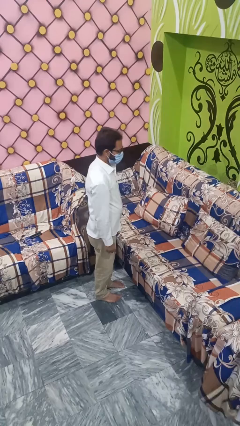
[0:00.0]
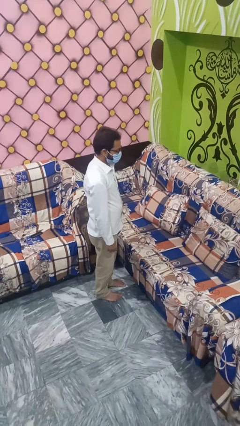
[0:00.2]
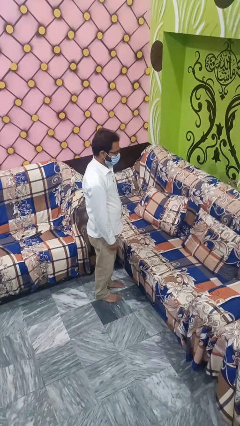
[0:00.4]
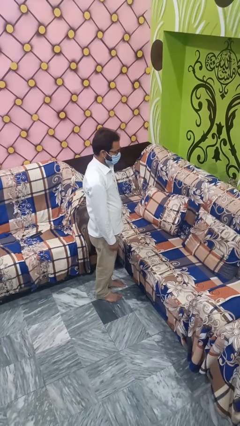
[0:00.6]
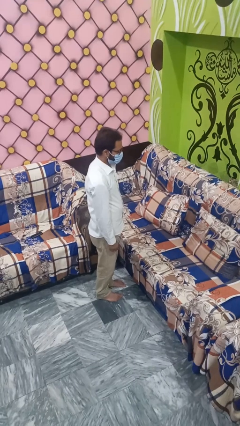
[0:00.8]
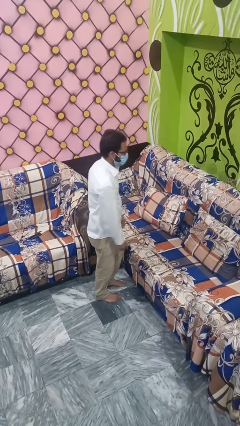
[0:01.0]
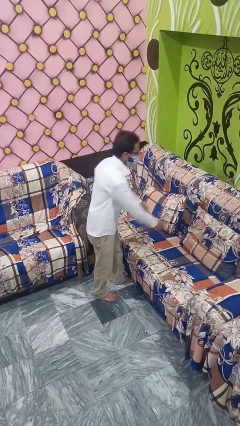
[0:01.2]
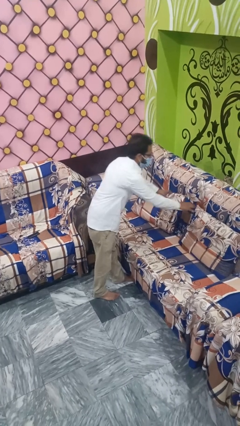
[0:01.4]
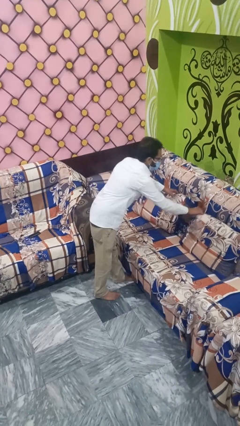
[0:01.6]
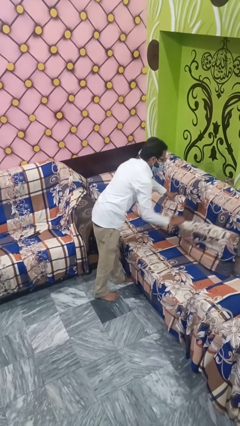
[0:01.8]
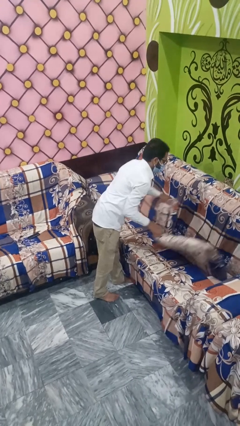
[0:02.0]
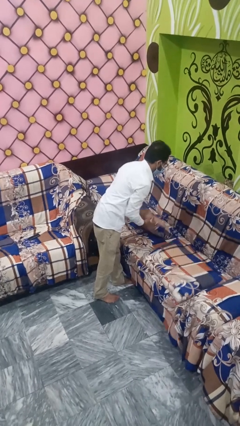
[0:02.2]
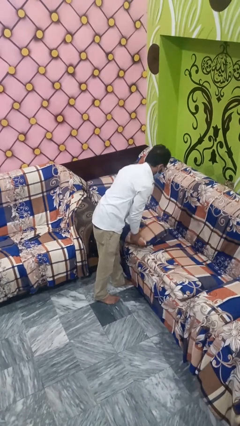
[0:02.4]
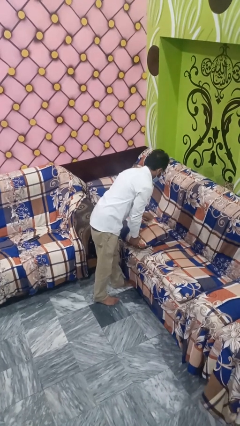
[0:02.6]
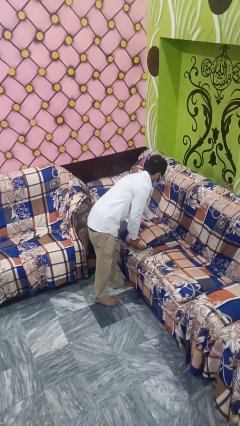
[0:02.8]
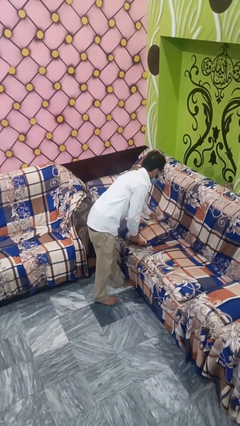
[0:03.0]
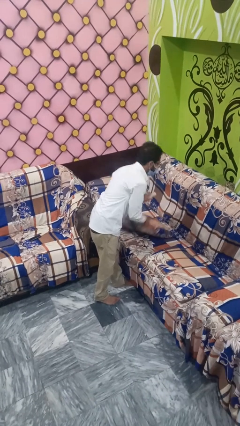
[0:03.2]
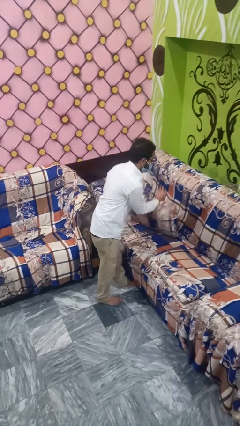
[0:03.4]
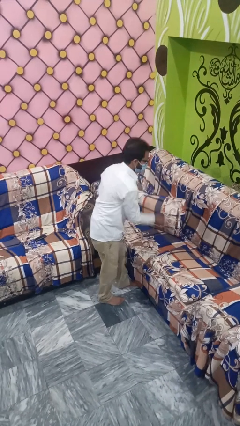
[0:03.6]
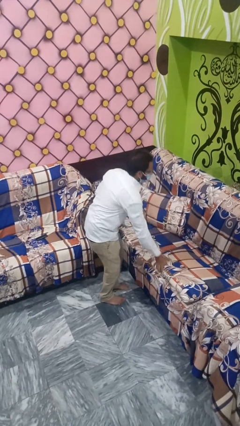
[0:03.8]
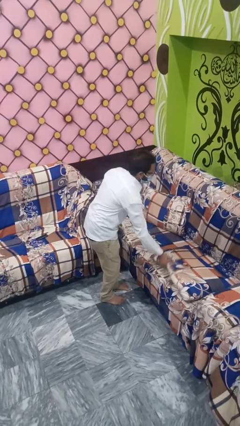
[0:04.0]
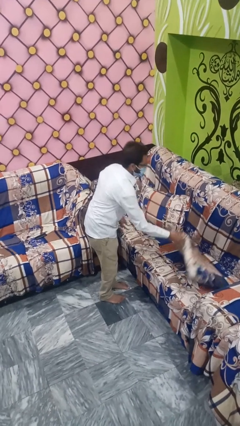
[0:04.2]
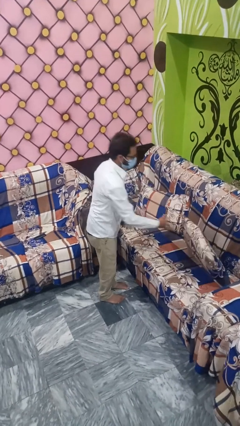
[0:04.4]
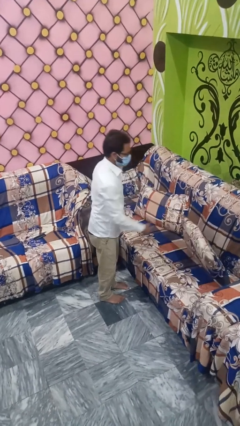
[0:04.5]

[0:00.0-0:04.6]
person searches in couch

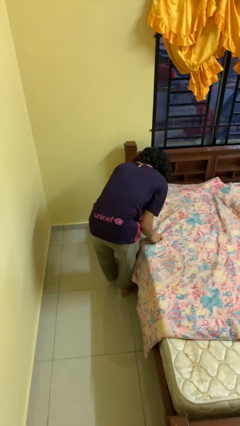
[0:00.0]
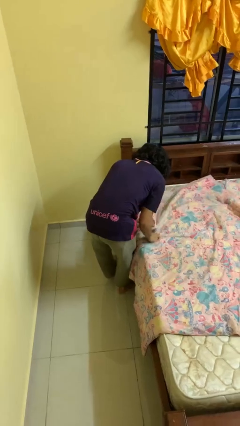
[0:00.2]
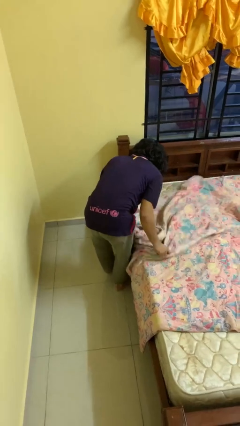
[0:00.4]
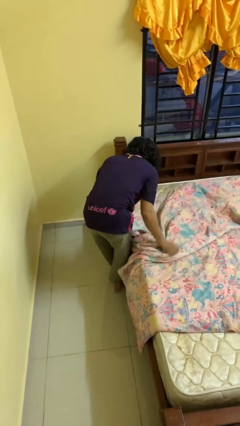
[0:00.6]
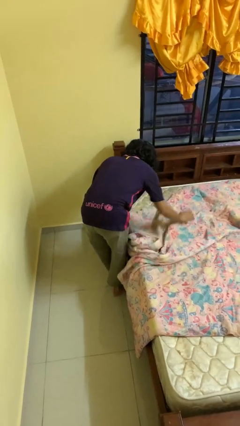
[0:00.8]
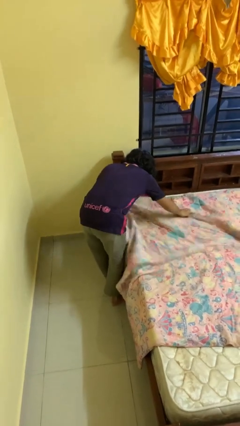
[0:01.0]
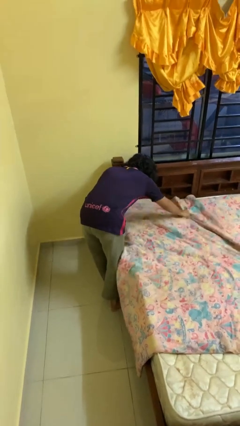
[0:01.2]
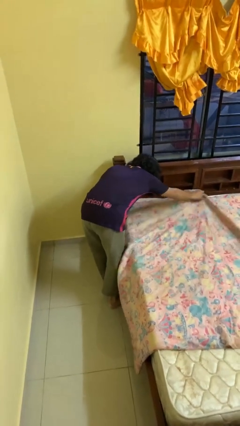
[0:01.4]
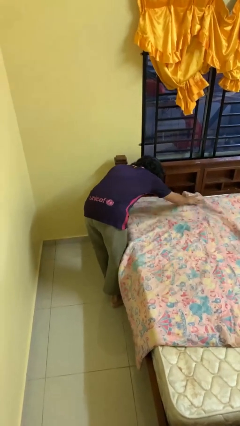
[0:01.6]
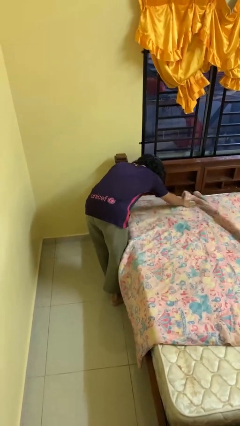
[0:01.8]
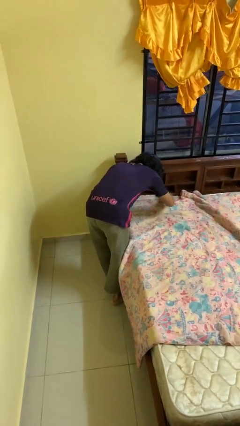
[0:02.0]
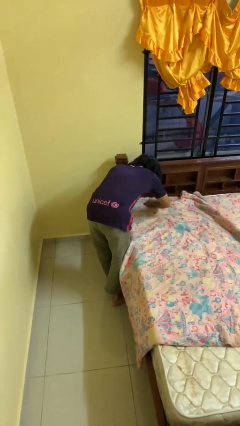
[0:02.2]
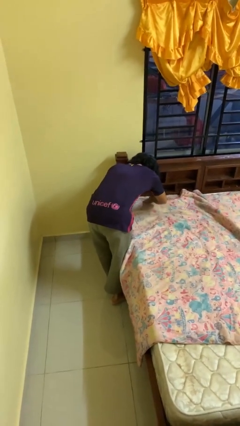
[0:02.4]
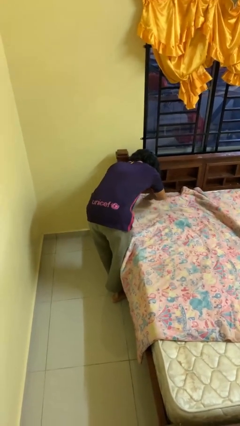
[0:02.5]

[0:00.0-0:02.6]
person makes bed

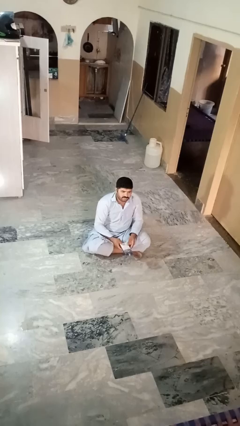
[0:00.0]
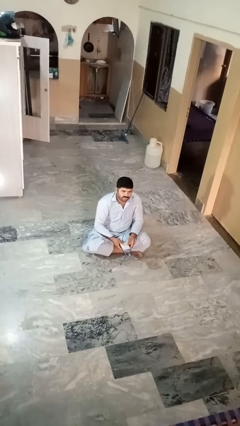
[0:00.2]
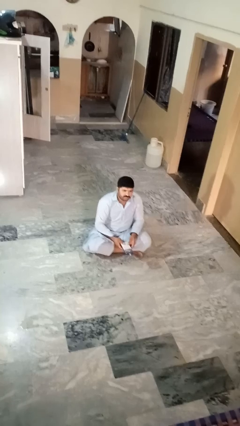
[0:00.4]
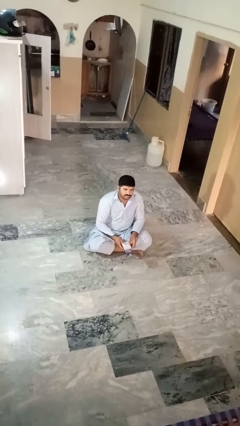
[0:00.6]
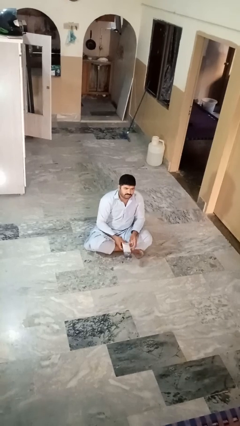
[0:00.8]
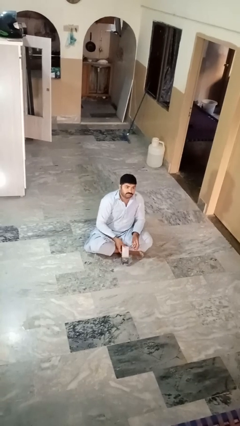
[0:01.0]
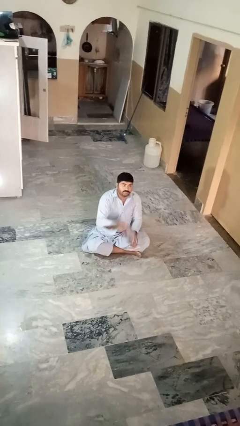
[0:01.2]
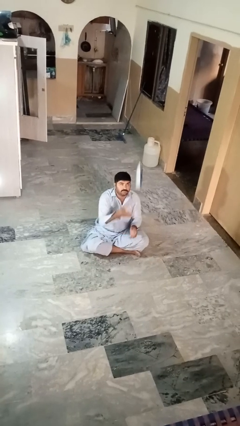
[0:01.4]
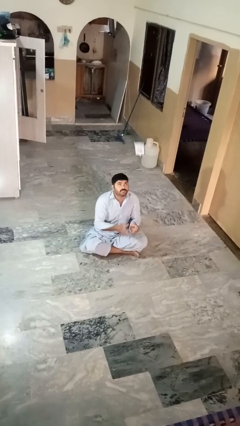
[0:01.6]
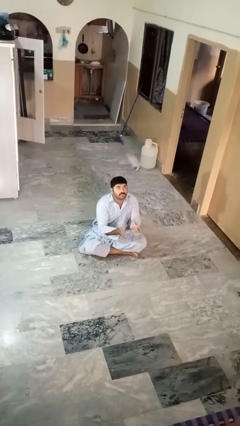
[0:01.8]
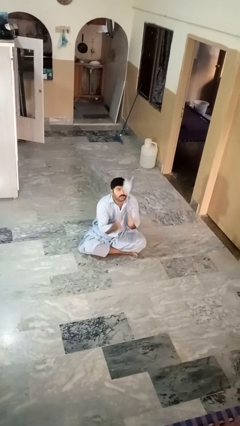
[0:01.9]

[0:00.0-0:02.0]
person drops object

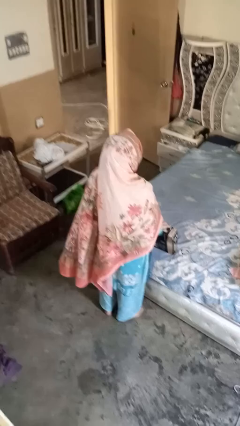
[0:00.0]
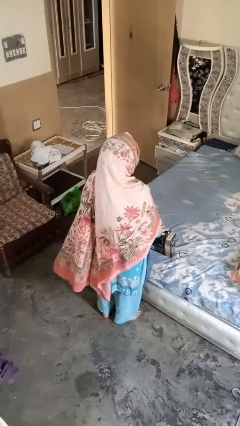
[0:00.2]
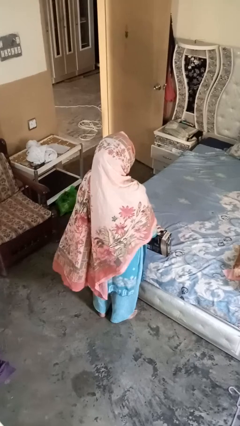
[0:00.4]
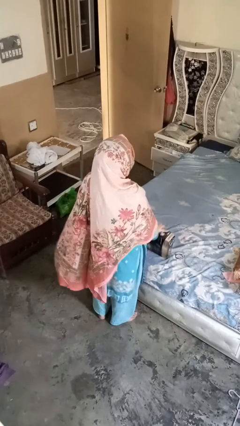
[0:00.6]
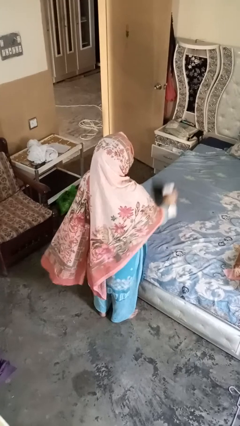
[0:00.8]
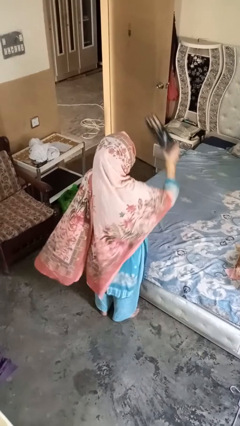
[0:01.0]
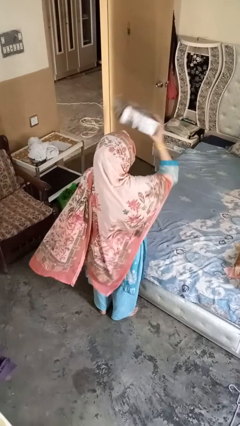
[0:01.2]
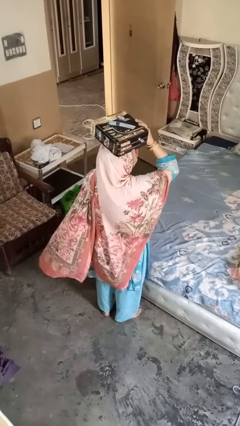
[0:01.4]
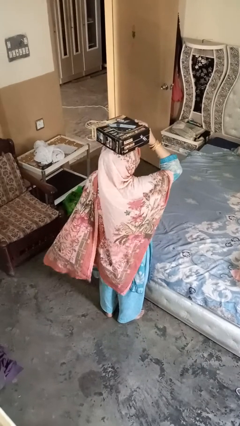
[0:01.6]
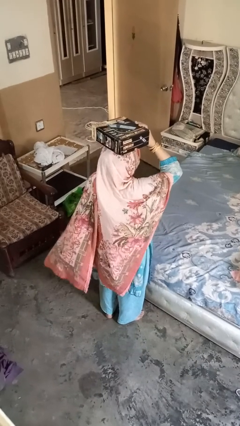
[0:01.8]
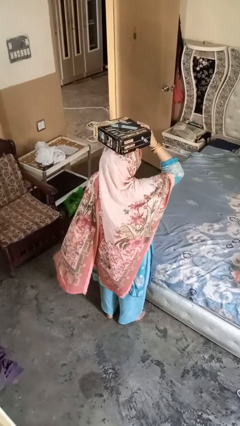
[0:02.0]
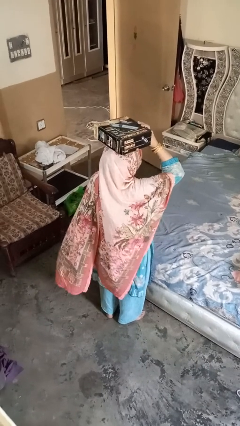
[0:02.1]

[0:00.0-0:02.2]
person holds object above head

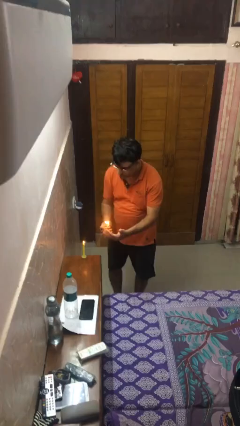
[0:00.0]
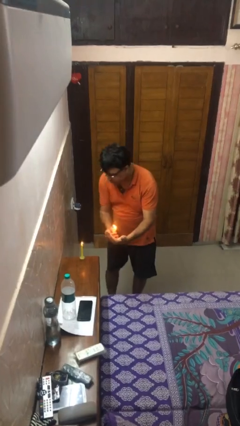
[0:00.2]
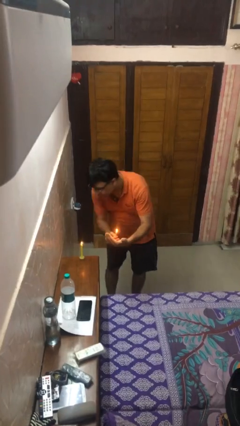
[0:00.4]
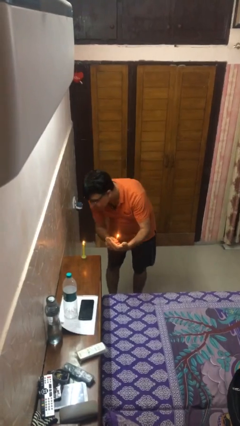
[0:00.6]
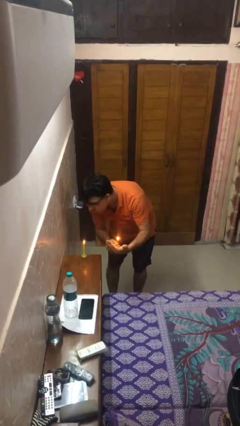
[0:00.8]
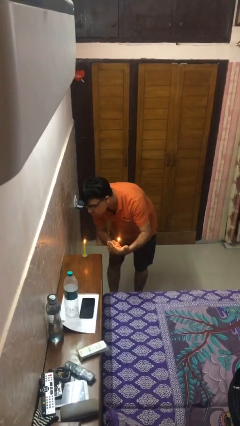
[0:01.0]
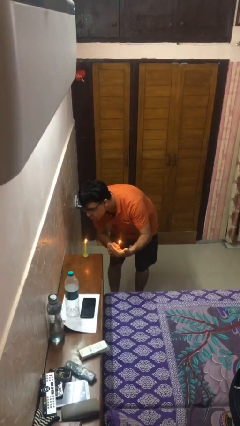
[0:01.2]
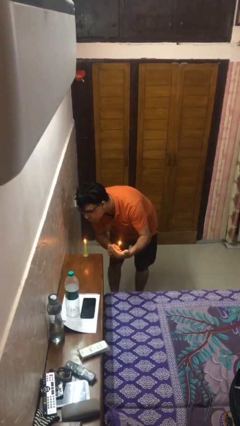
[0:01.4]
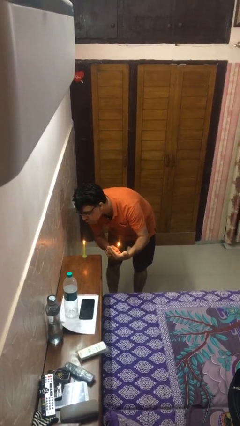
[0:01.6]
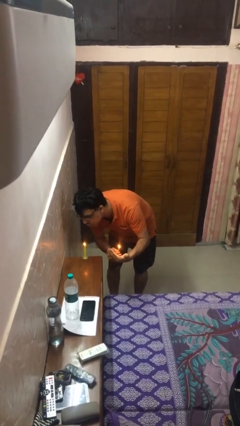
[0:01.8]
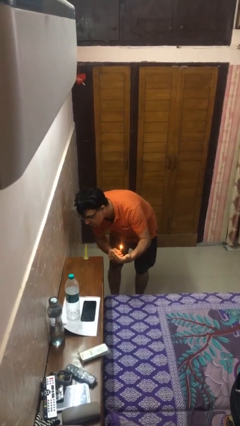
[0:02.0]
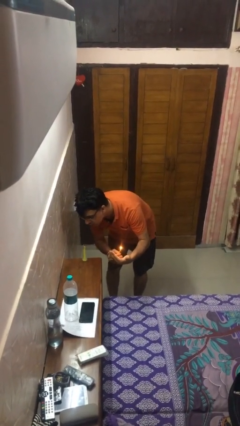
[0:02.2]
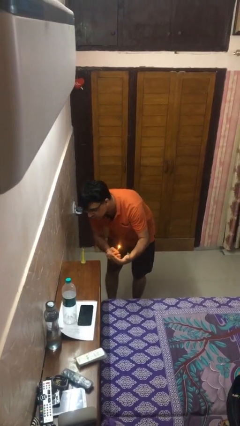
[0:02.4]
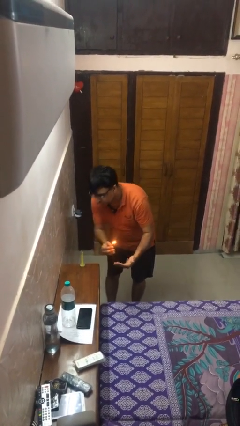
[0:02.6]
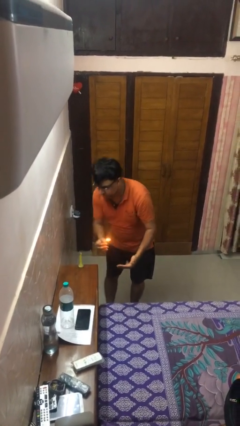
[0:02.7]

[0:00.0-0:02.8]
person extinguishes candle

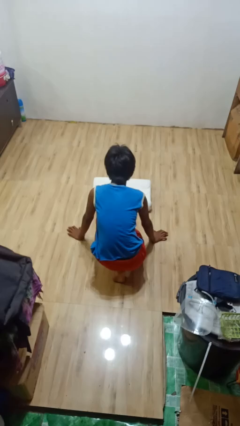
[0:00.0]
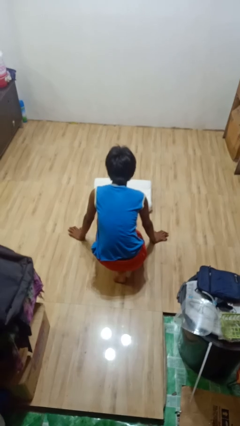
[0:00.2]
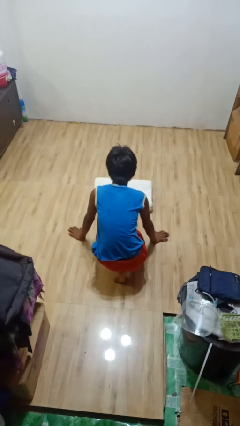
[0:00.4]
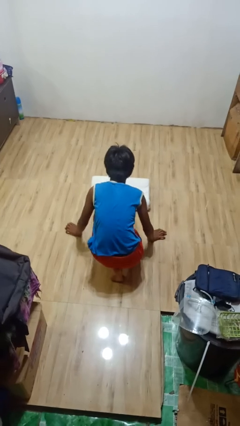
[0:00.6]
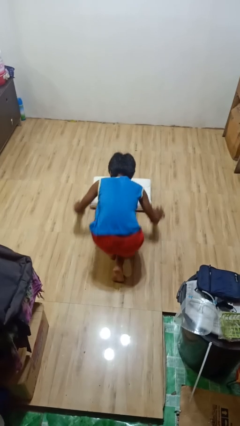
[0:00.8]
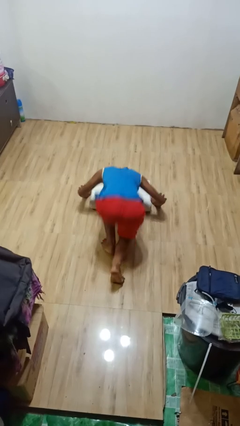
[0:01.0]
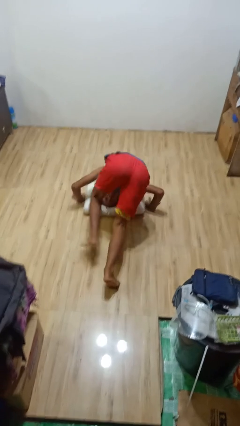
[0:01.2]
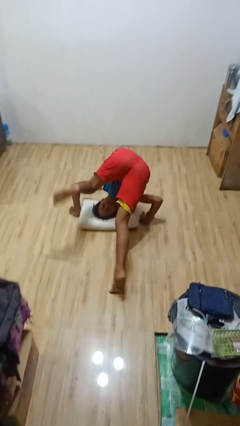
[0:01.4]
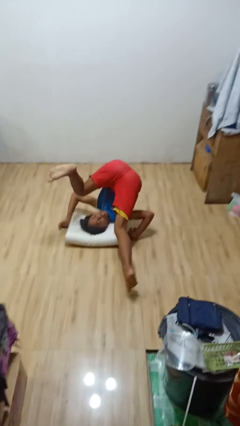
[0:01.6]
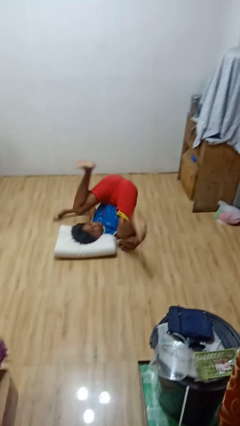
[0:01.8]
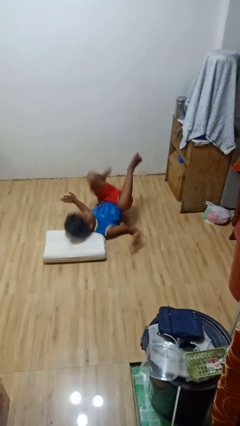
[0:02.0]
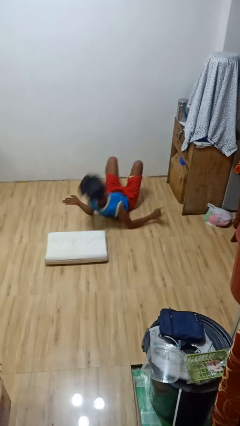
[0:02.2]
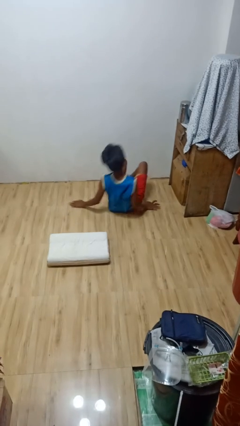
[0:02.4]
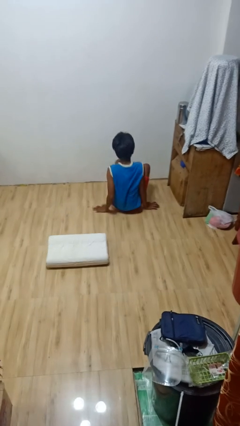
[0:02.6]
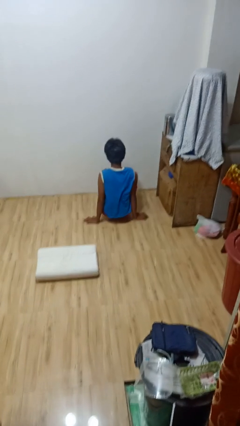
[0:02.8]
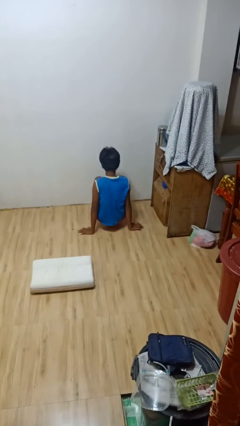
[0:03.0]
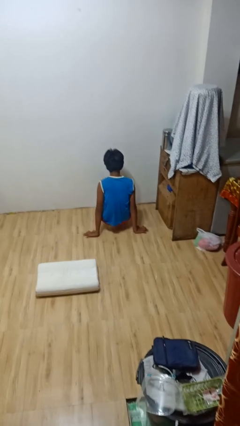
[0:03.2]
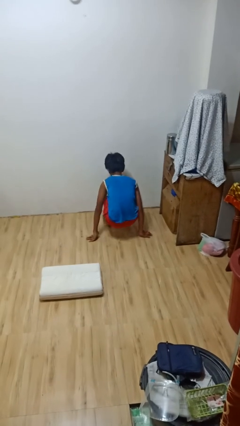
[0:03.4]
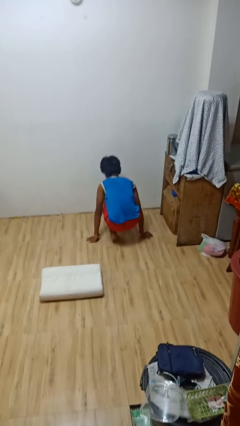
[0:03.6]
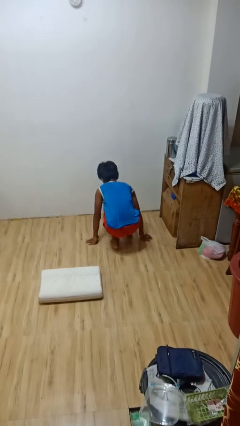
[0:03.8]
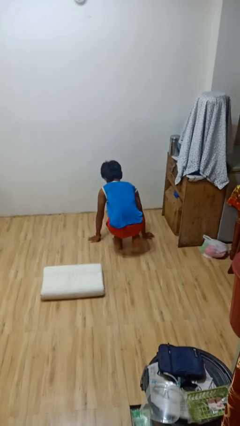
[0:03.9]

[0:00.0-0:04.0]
person somersaults
